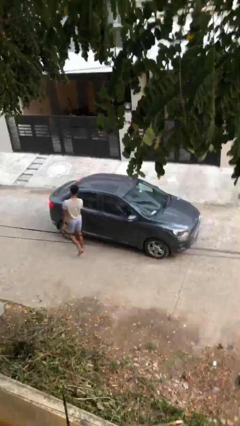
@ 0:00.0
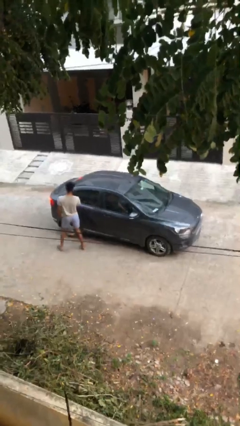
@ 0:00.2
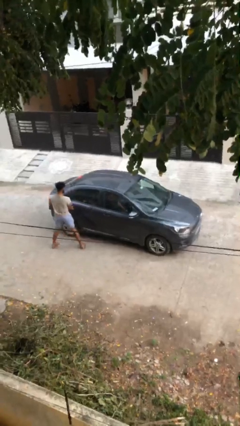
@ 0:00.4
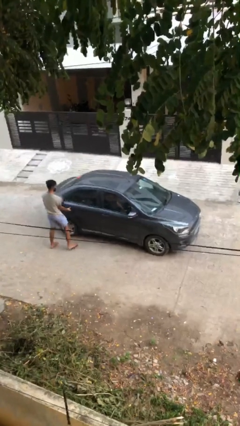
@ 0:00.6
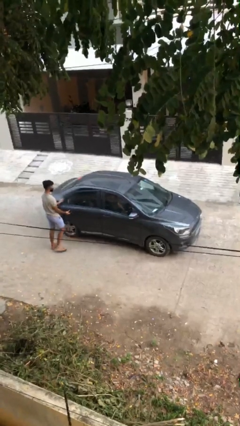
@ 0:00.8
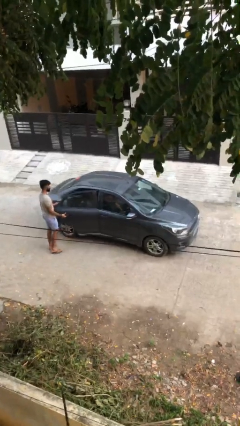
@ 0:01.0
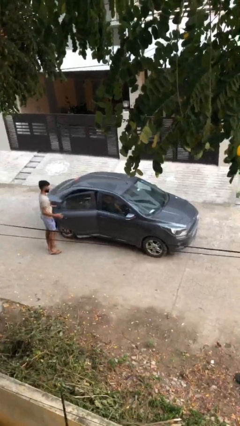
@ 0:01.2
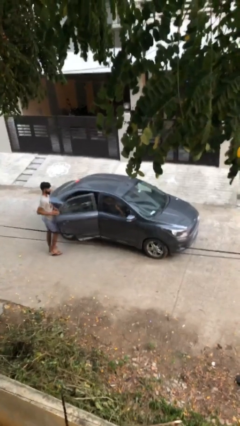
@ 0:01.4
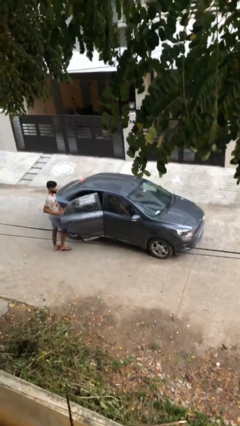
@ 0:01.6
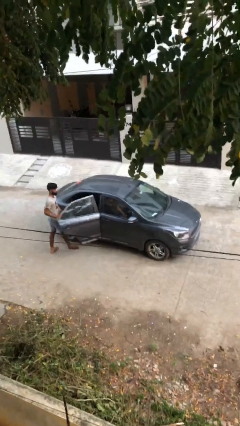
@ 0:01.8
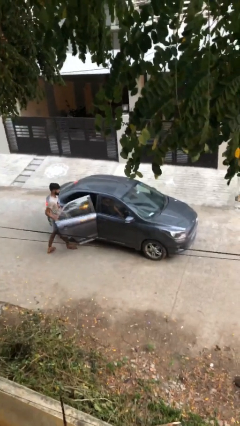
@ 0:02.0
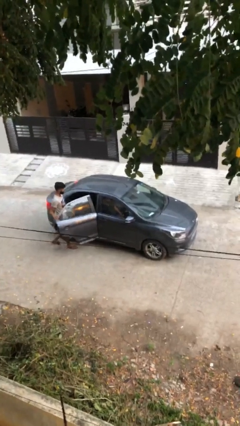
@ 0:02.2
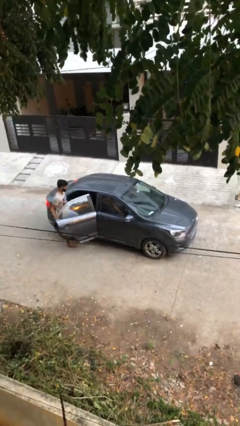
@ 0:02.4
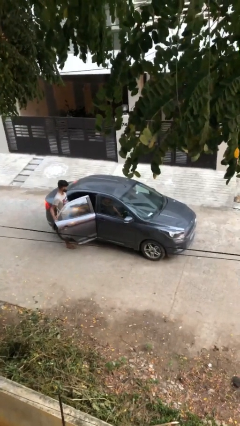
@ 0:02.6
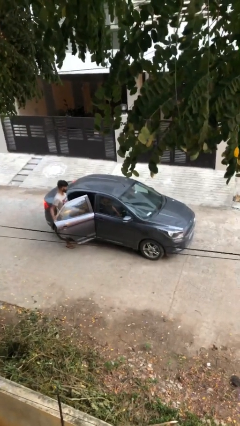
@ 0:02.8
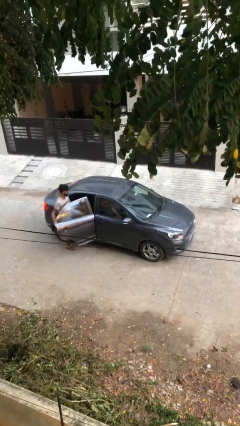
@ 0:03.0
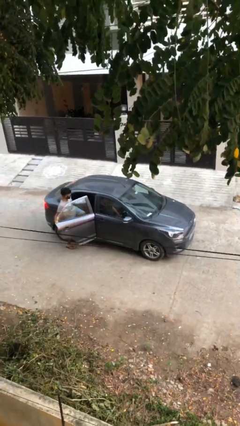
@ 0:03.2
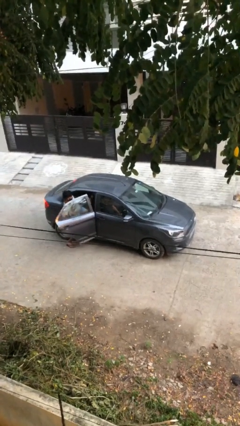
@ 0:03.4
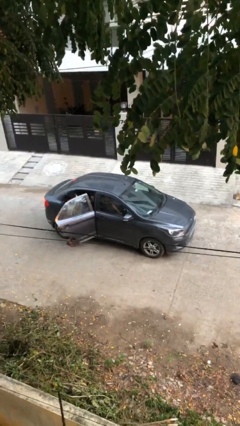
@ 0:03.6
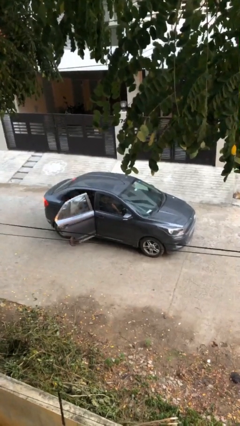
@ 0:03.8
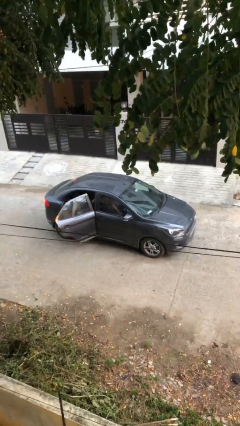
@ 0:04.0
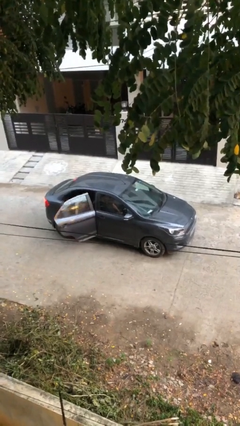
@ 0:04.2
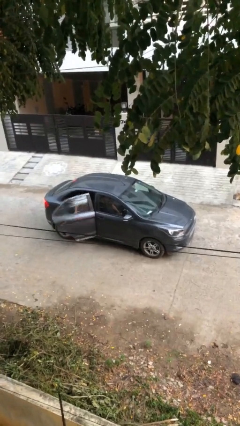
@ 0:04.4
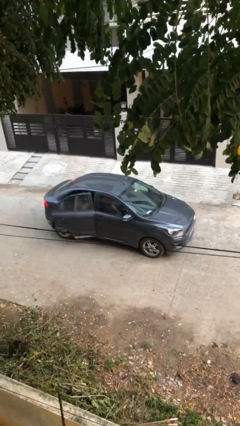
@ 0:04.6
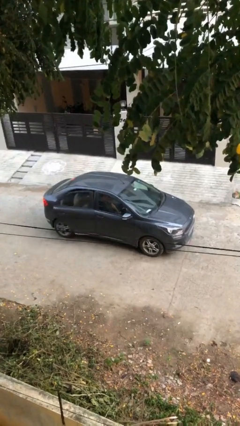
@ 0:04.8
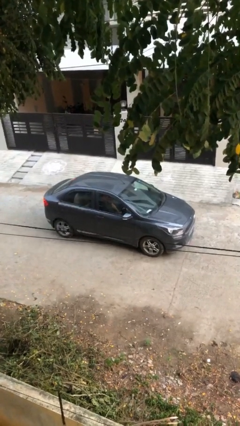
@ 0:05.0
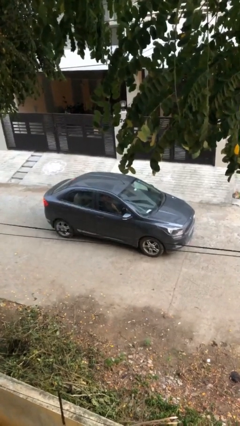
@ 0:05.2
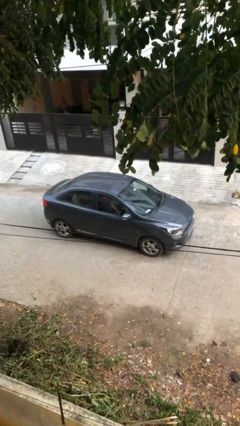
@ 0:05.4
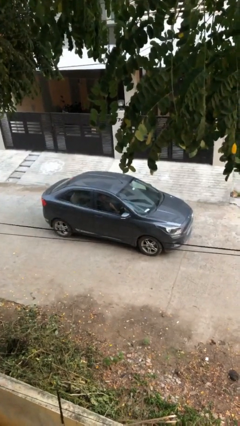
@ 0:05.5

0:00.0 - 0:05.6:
car picks up person

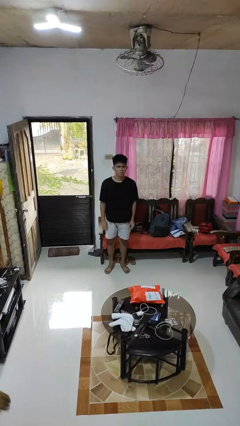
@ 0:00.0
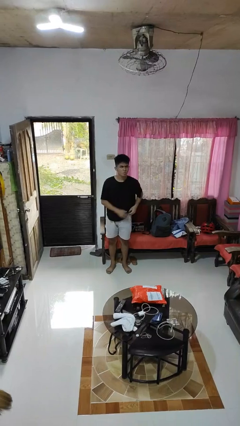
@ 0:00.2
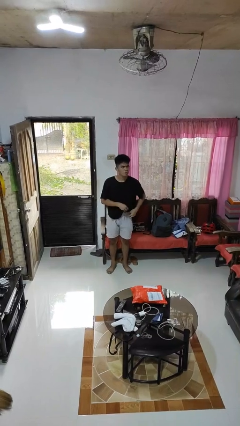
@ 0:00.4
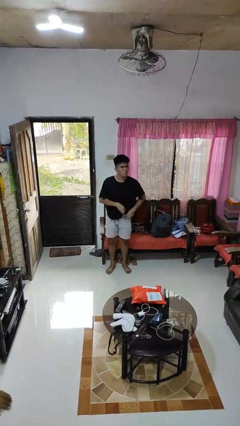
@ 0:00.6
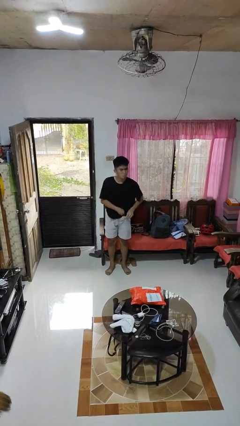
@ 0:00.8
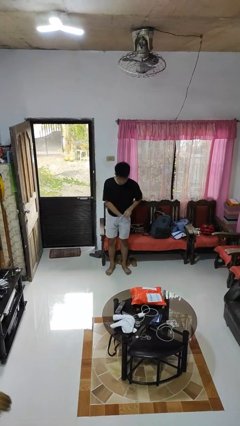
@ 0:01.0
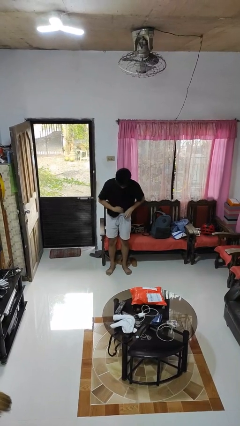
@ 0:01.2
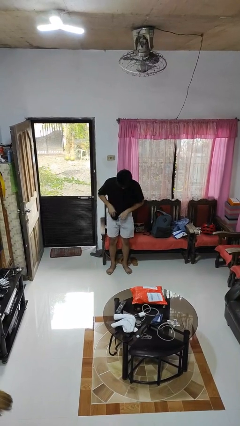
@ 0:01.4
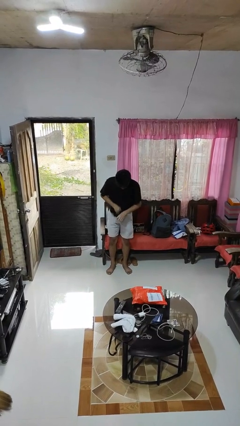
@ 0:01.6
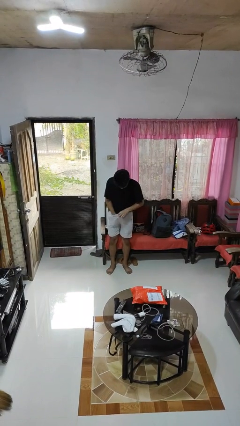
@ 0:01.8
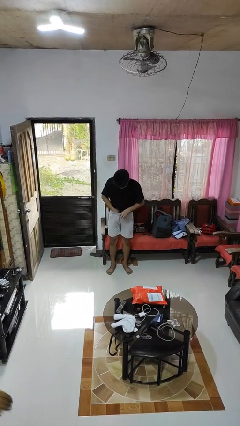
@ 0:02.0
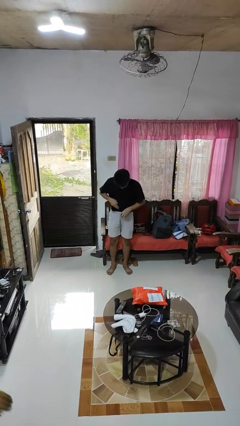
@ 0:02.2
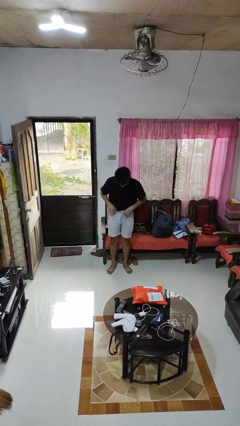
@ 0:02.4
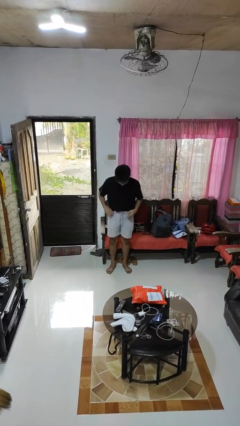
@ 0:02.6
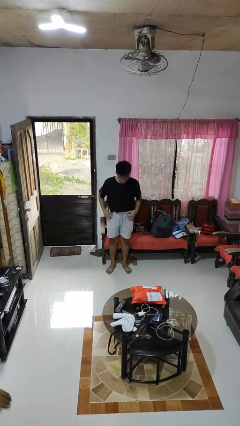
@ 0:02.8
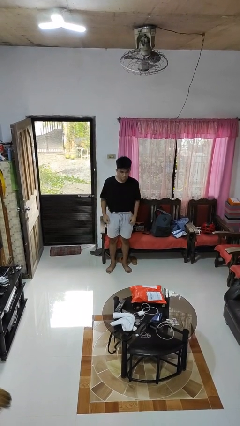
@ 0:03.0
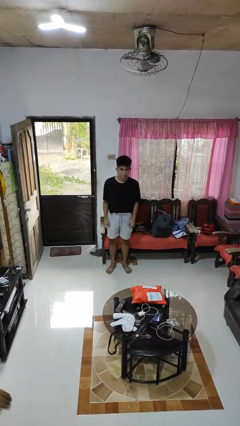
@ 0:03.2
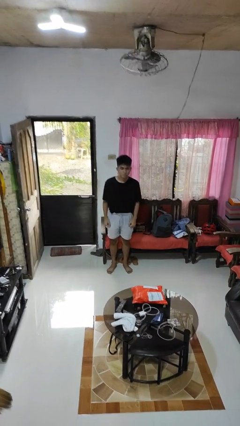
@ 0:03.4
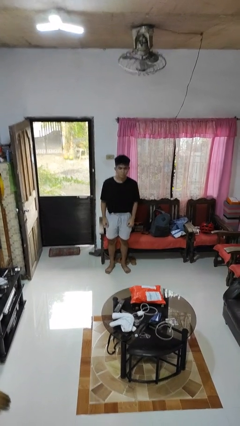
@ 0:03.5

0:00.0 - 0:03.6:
person tucks in shirt

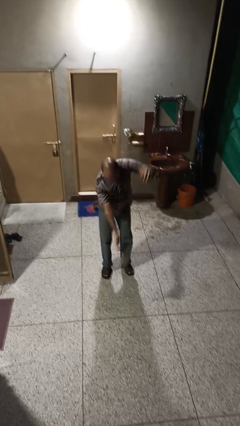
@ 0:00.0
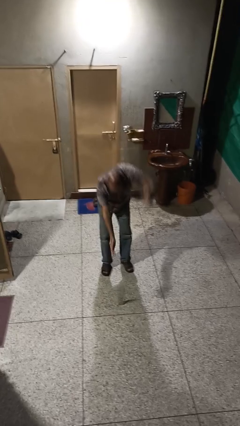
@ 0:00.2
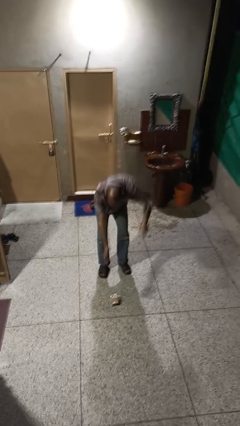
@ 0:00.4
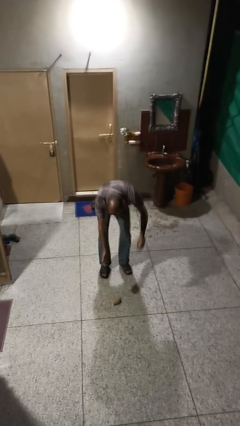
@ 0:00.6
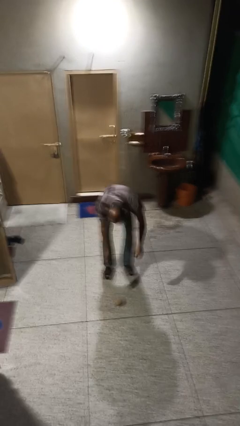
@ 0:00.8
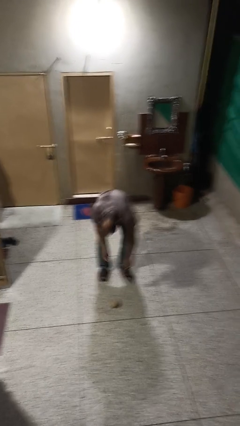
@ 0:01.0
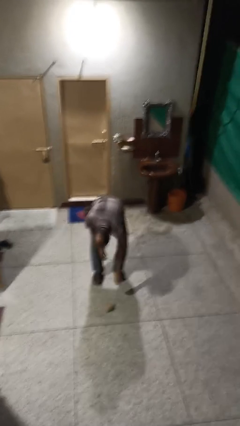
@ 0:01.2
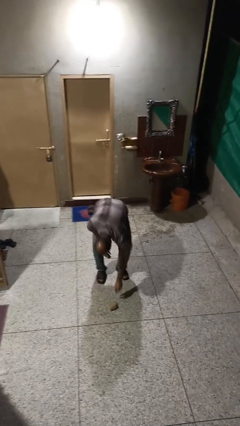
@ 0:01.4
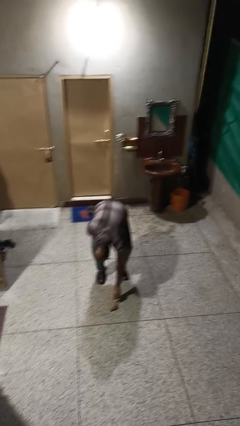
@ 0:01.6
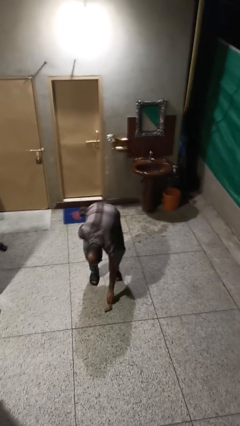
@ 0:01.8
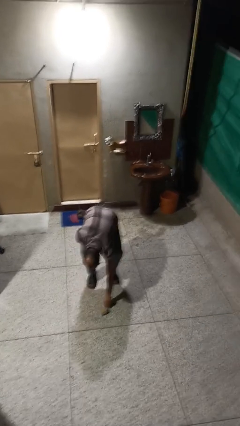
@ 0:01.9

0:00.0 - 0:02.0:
person catches dropped object

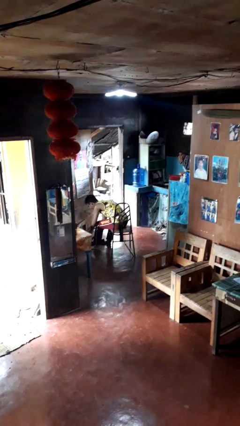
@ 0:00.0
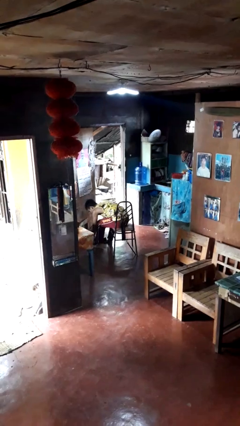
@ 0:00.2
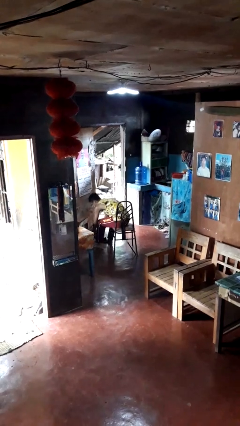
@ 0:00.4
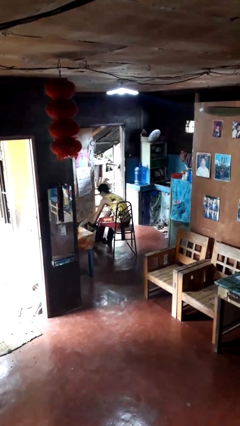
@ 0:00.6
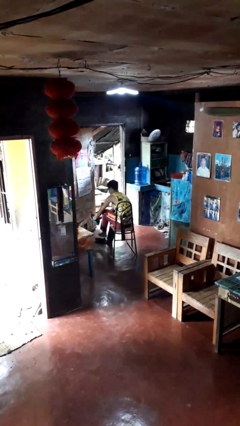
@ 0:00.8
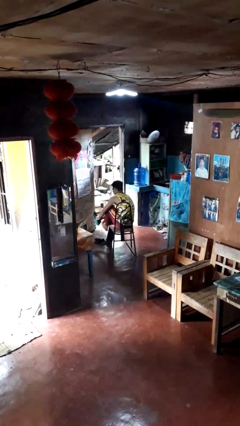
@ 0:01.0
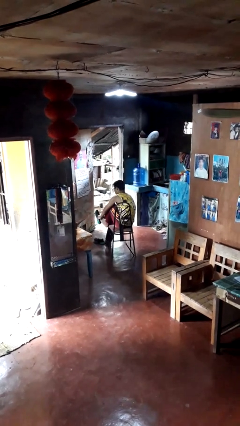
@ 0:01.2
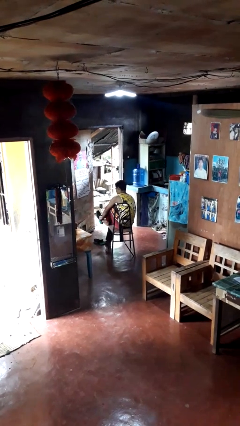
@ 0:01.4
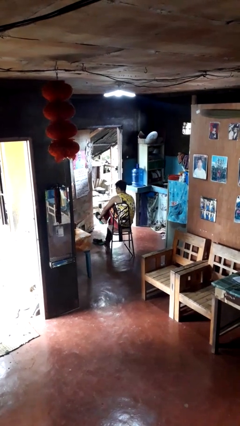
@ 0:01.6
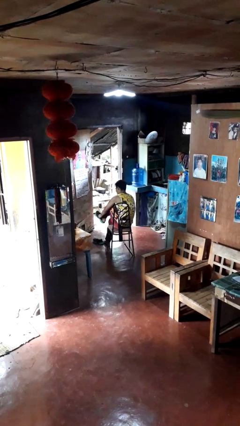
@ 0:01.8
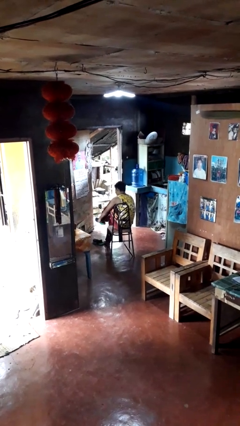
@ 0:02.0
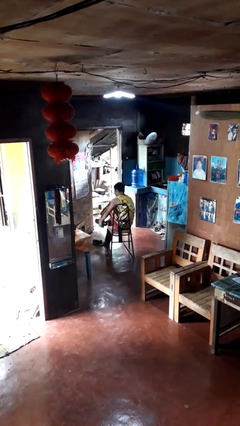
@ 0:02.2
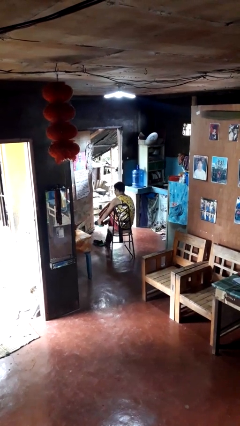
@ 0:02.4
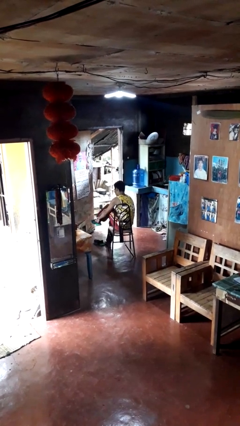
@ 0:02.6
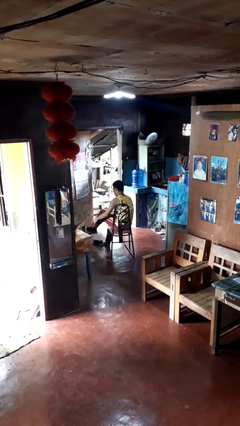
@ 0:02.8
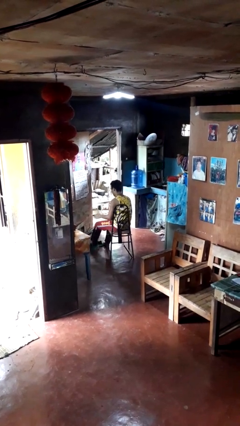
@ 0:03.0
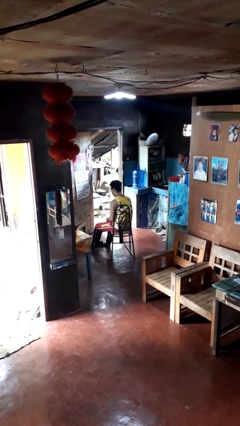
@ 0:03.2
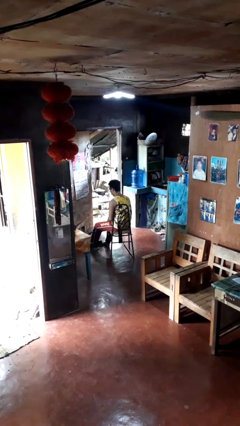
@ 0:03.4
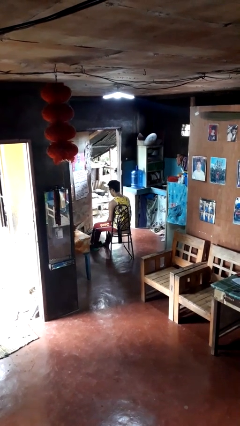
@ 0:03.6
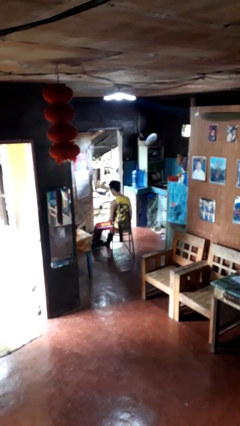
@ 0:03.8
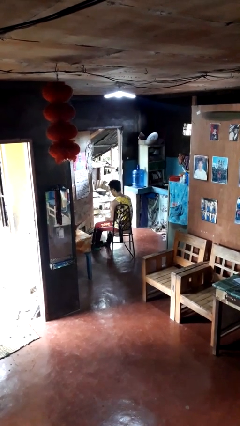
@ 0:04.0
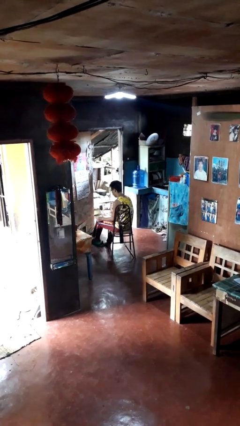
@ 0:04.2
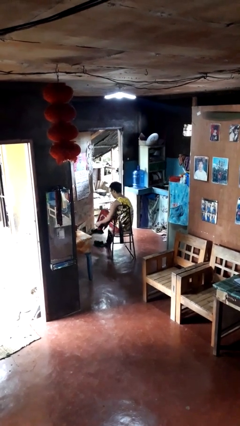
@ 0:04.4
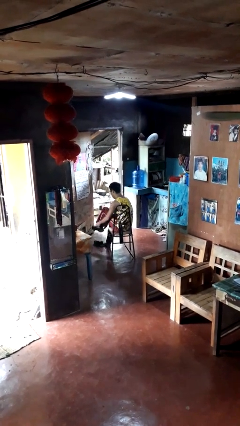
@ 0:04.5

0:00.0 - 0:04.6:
person puts on shoes

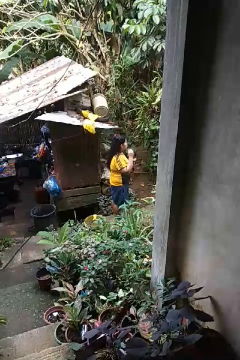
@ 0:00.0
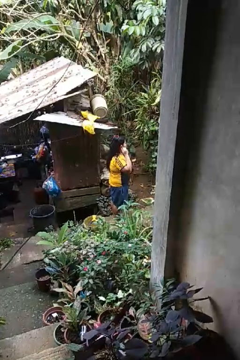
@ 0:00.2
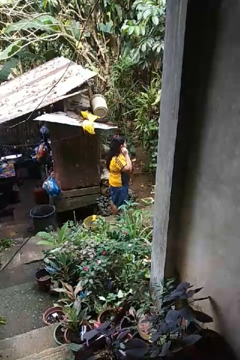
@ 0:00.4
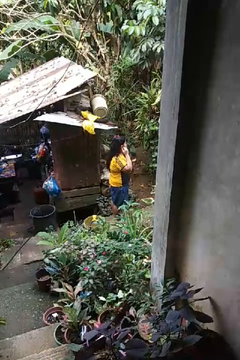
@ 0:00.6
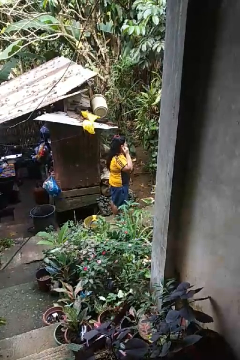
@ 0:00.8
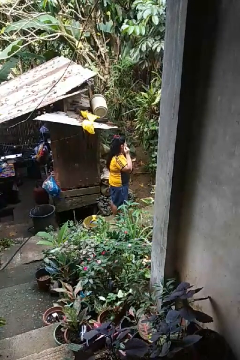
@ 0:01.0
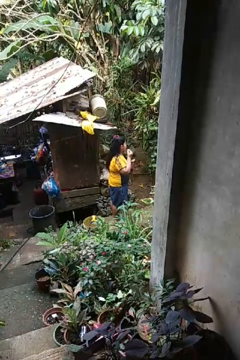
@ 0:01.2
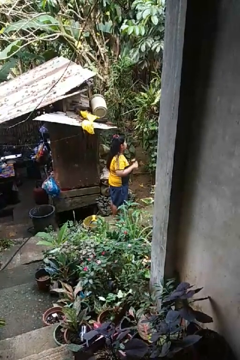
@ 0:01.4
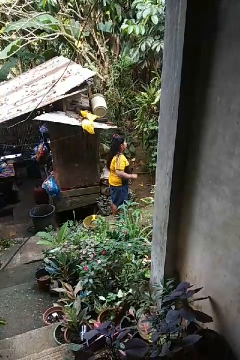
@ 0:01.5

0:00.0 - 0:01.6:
person takes off earrings

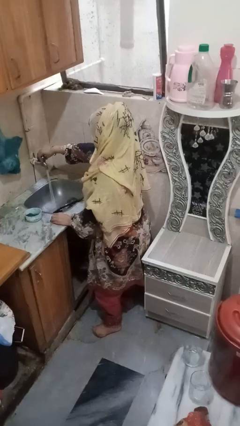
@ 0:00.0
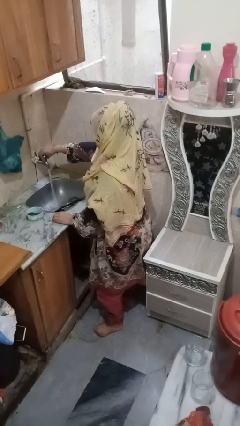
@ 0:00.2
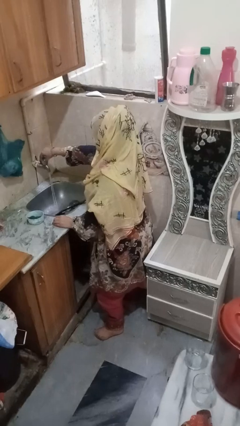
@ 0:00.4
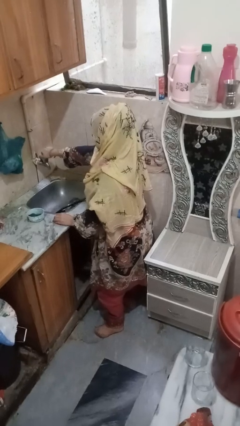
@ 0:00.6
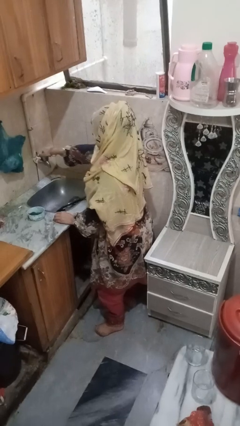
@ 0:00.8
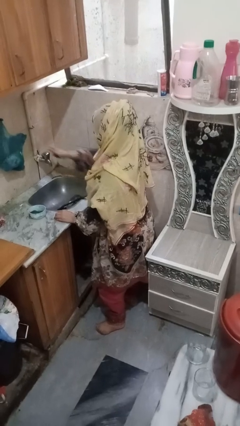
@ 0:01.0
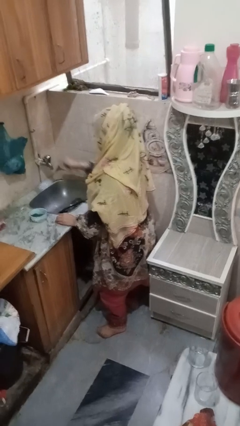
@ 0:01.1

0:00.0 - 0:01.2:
person turns off faucet
